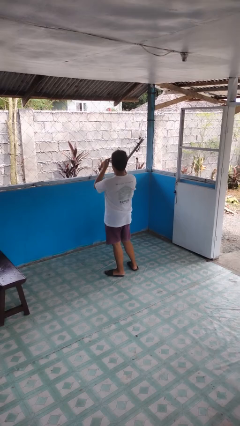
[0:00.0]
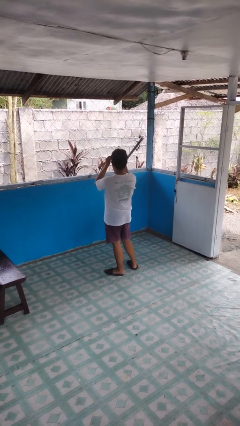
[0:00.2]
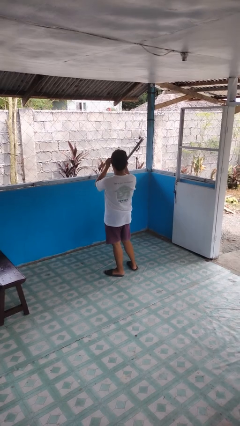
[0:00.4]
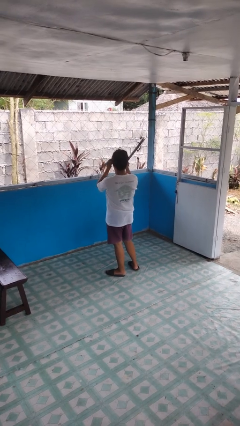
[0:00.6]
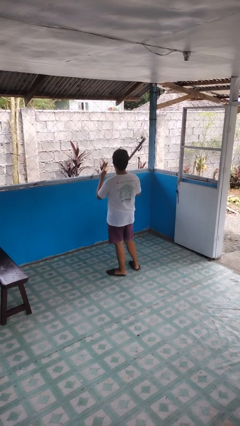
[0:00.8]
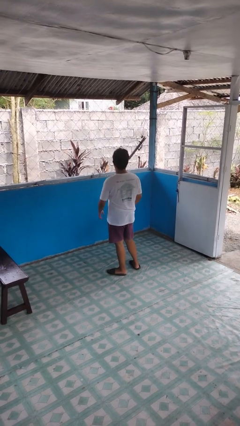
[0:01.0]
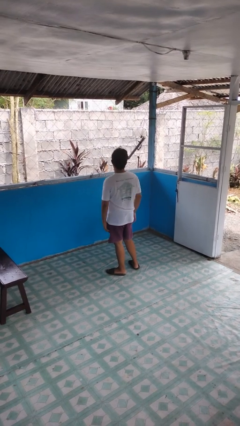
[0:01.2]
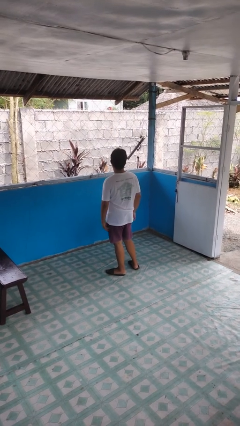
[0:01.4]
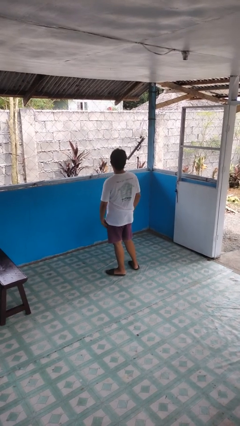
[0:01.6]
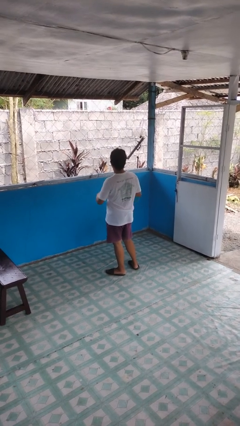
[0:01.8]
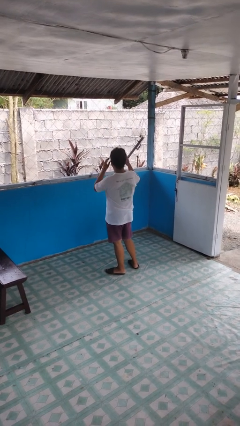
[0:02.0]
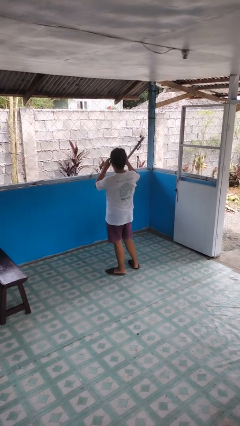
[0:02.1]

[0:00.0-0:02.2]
person puts on sunglasses

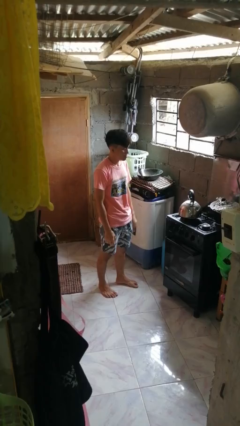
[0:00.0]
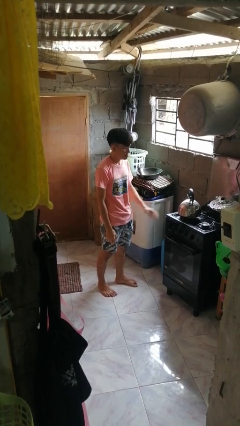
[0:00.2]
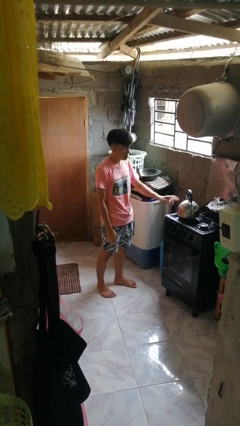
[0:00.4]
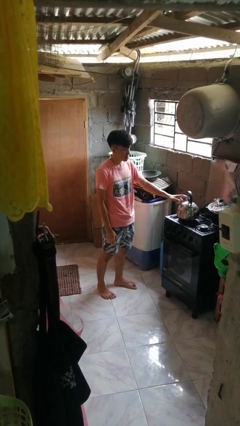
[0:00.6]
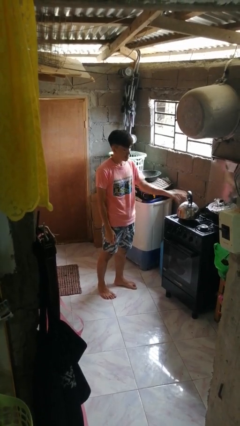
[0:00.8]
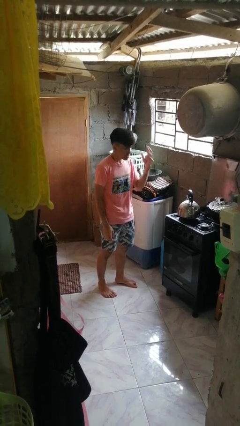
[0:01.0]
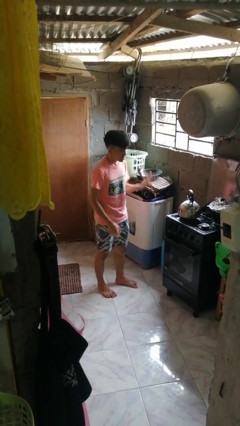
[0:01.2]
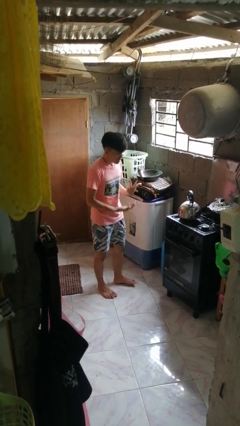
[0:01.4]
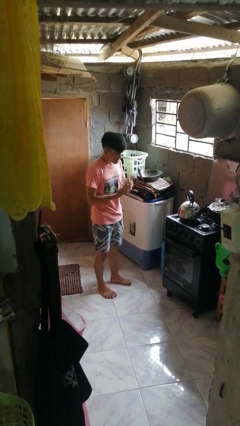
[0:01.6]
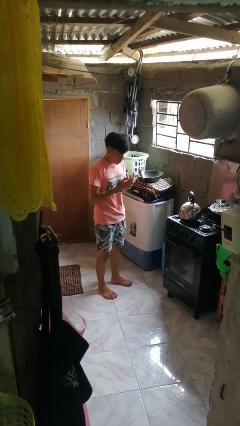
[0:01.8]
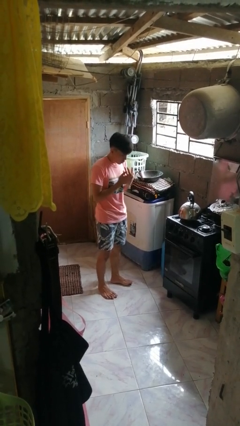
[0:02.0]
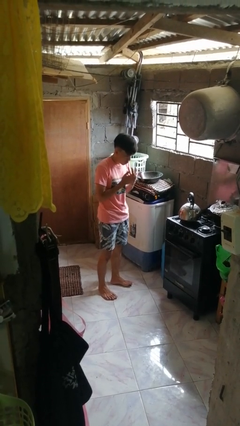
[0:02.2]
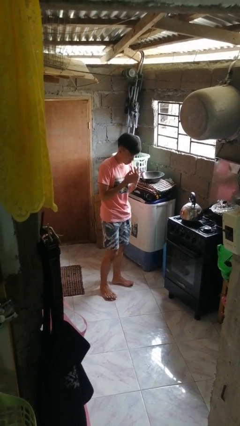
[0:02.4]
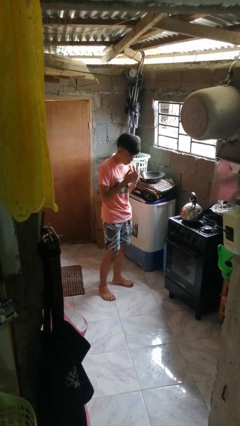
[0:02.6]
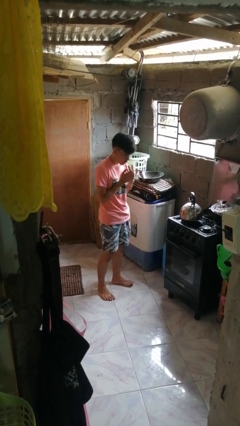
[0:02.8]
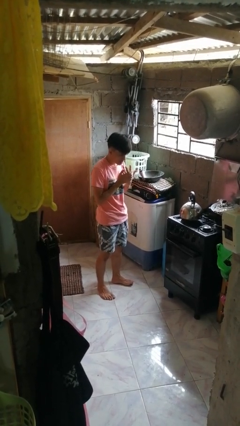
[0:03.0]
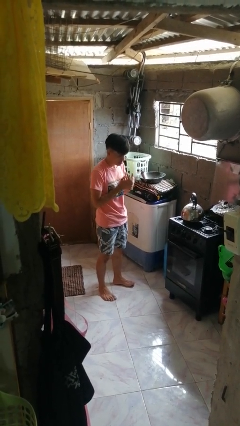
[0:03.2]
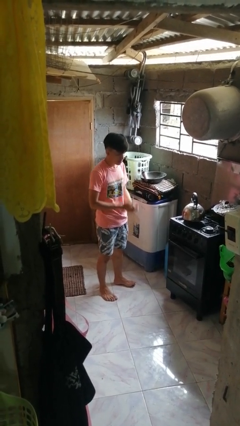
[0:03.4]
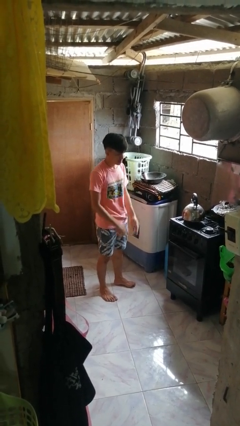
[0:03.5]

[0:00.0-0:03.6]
person burns hand

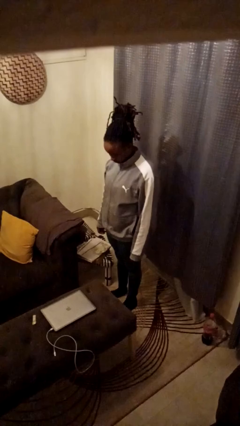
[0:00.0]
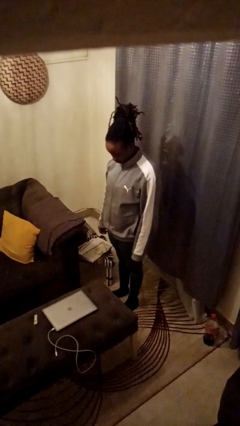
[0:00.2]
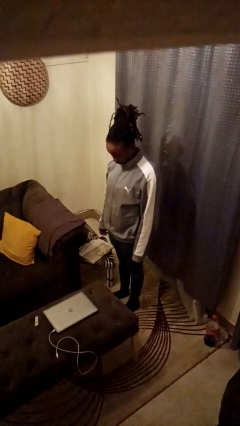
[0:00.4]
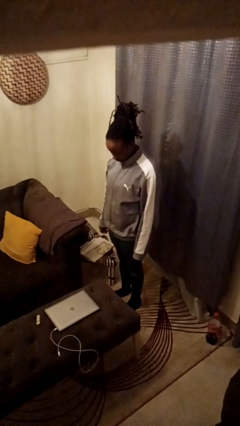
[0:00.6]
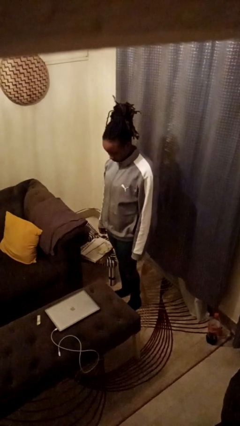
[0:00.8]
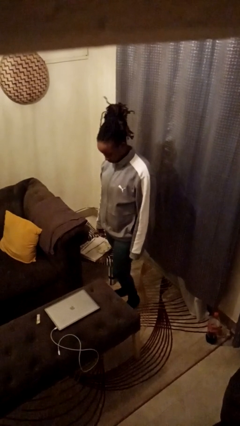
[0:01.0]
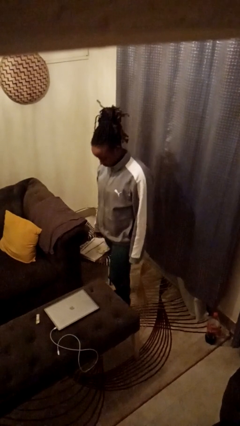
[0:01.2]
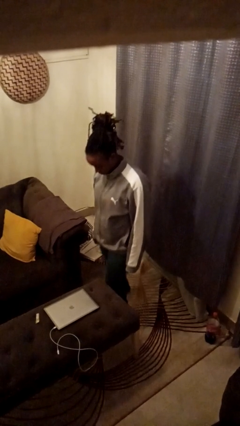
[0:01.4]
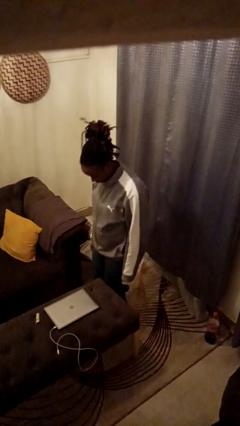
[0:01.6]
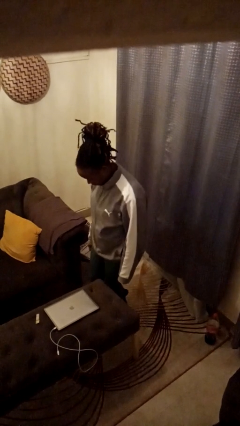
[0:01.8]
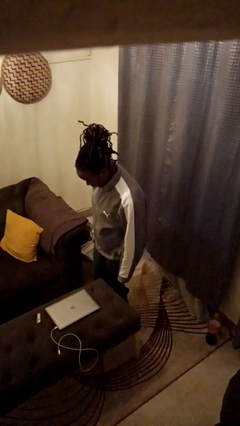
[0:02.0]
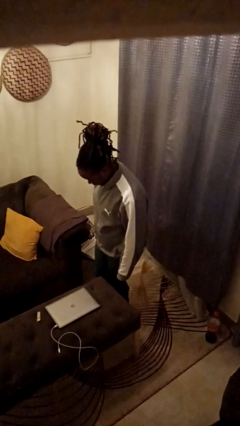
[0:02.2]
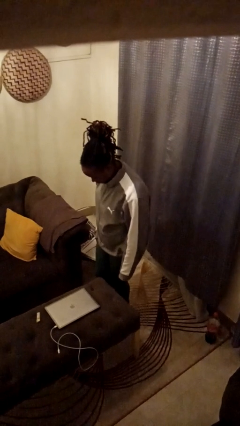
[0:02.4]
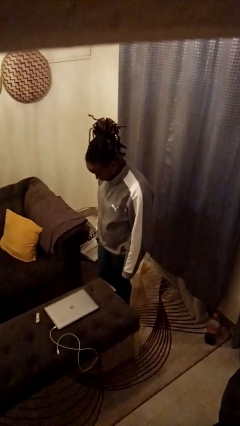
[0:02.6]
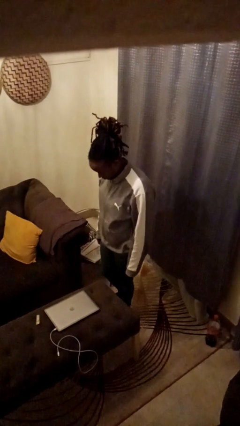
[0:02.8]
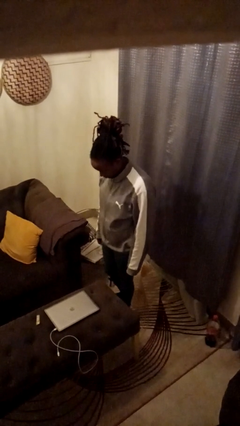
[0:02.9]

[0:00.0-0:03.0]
person bumps into table

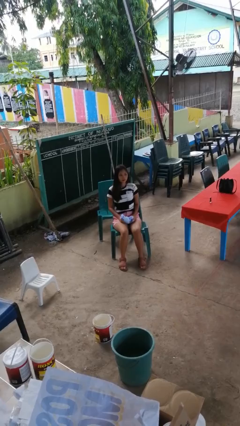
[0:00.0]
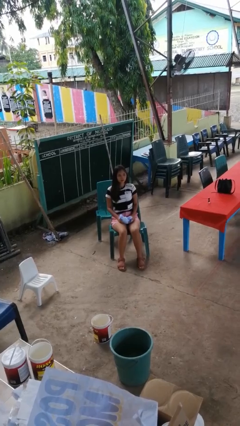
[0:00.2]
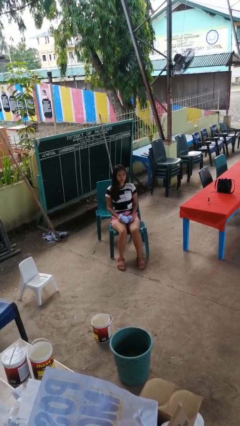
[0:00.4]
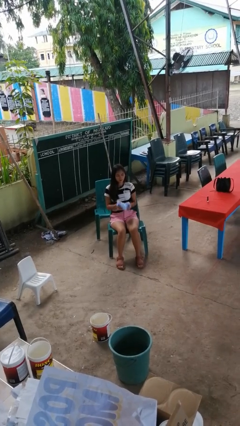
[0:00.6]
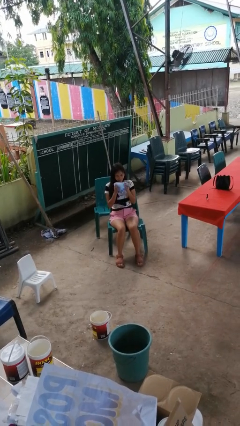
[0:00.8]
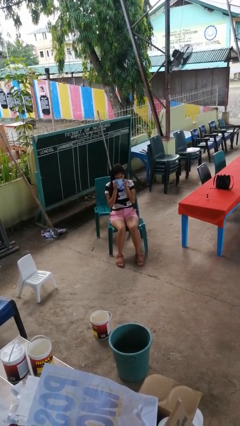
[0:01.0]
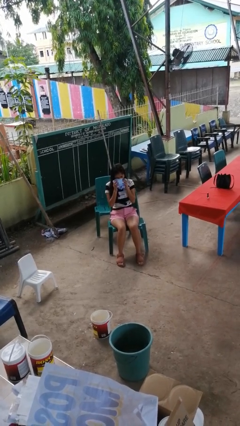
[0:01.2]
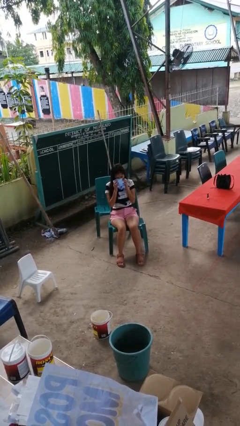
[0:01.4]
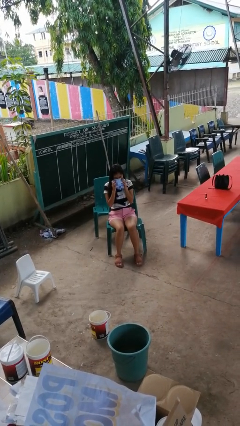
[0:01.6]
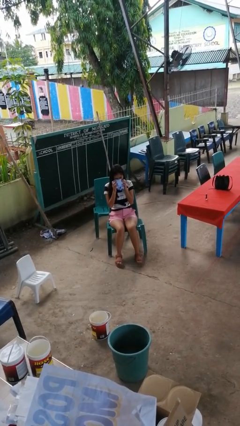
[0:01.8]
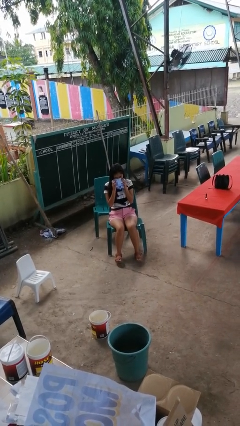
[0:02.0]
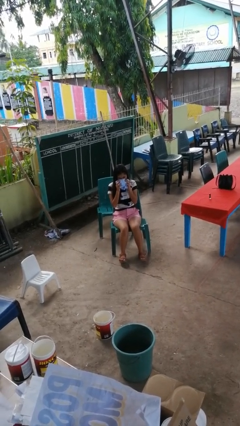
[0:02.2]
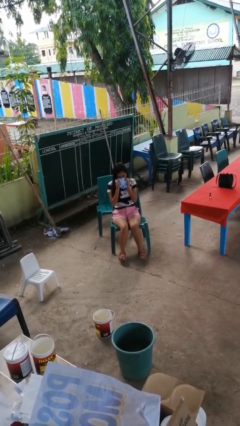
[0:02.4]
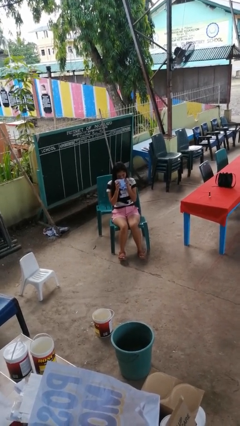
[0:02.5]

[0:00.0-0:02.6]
person blows nose

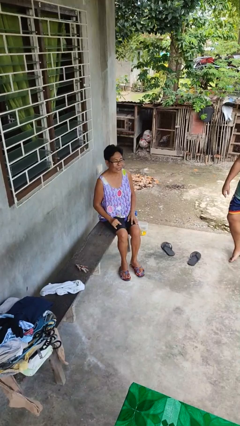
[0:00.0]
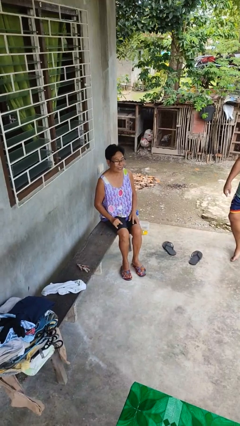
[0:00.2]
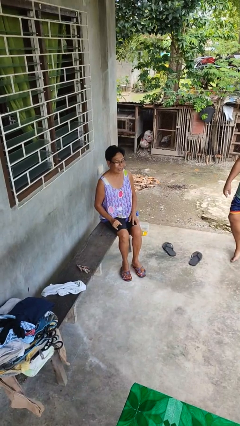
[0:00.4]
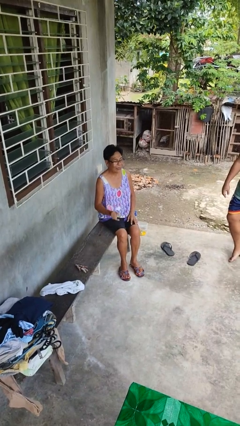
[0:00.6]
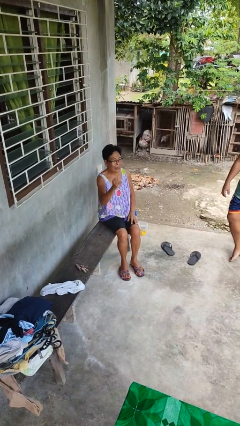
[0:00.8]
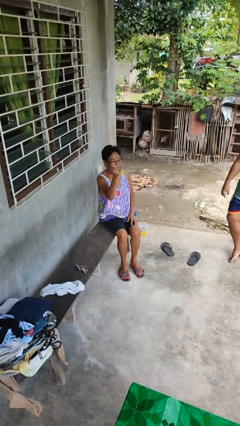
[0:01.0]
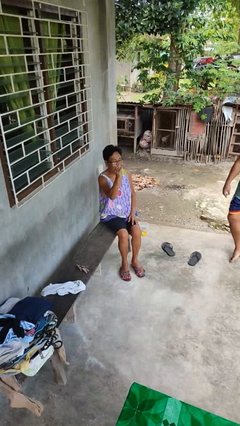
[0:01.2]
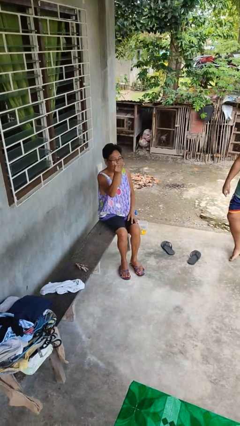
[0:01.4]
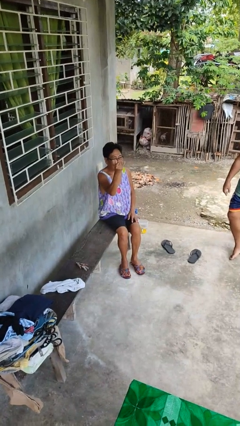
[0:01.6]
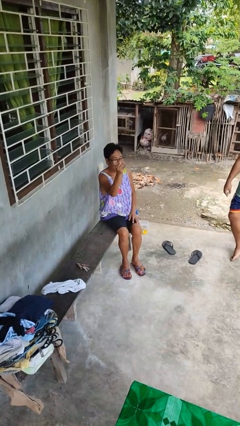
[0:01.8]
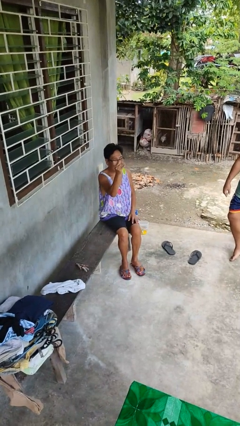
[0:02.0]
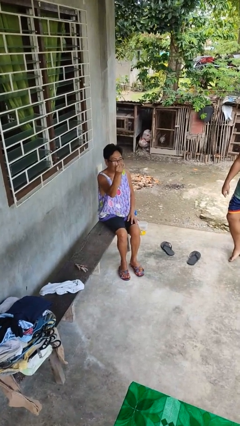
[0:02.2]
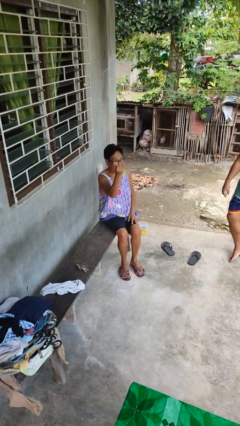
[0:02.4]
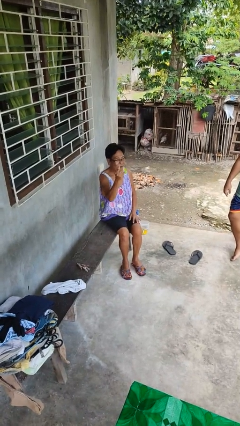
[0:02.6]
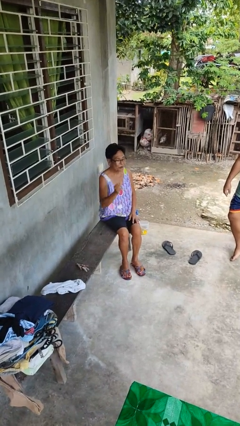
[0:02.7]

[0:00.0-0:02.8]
person gestures hang loose

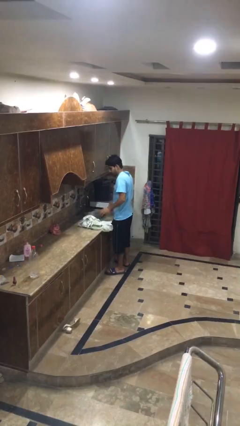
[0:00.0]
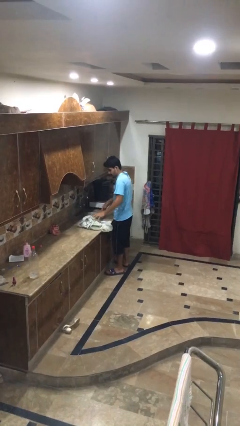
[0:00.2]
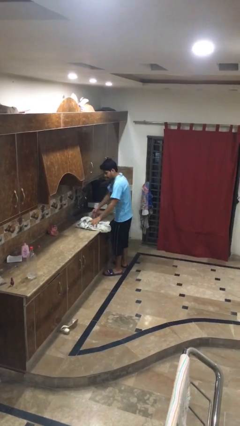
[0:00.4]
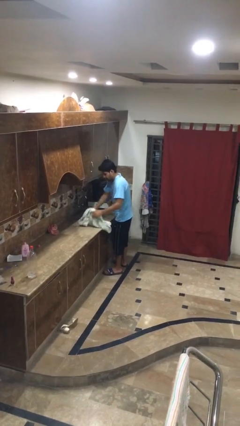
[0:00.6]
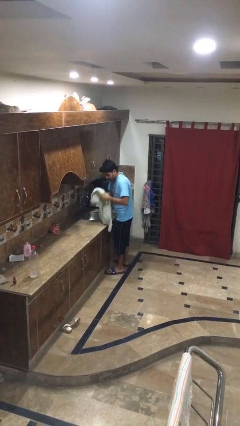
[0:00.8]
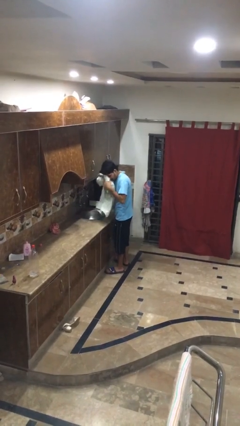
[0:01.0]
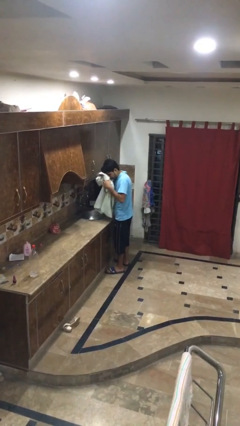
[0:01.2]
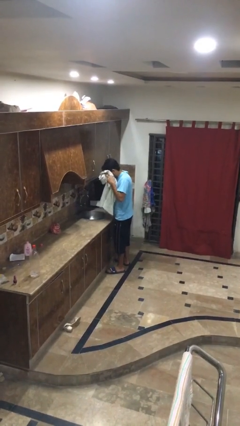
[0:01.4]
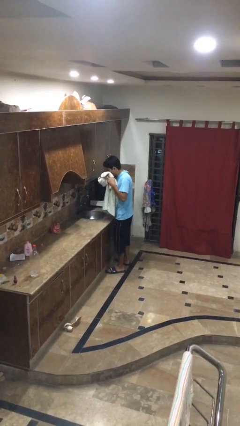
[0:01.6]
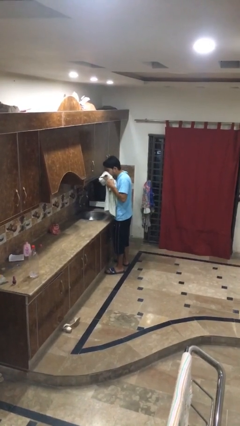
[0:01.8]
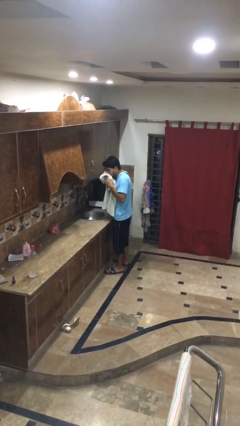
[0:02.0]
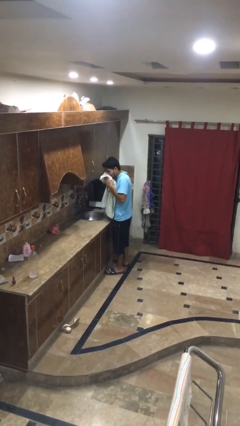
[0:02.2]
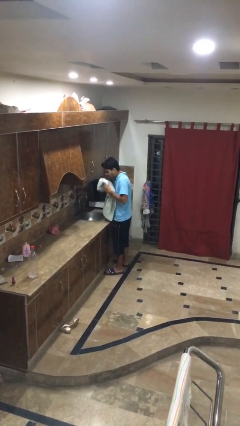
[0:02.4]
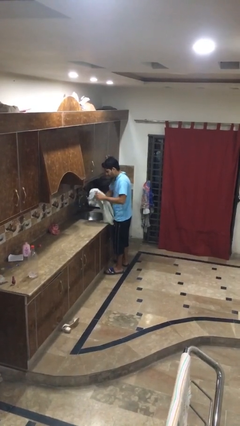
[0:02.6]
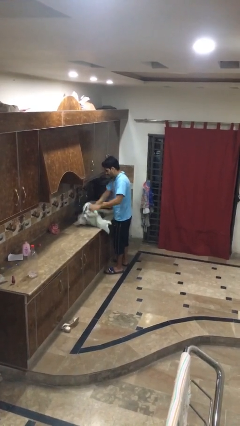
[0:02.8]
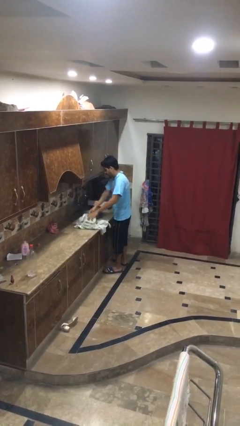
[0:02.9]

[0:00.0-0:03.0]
person dries face with towel

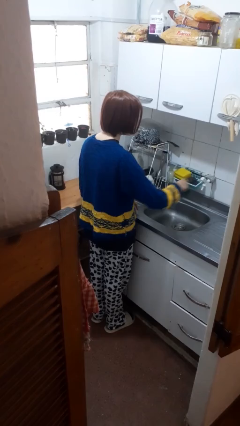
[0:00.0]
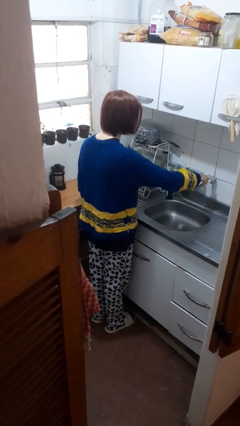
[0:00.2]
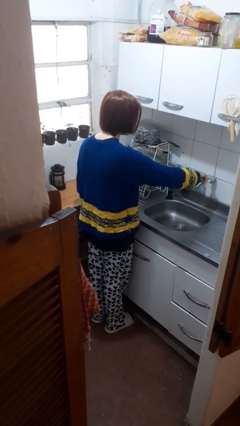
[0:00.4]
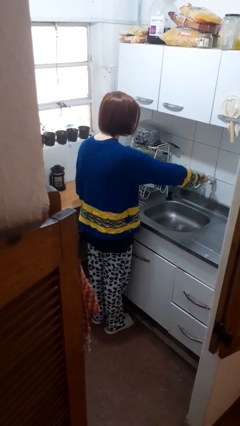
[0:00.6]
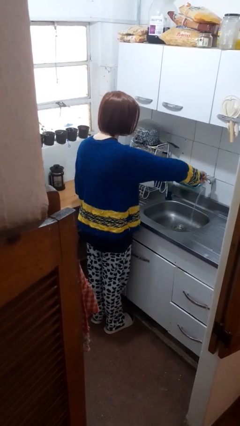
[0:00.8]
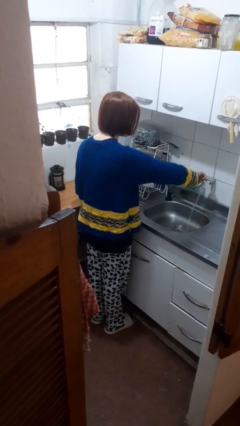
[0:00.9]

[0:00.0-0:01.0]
person turns on faucet
